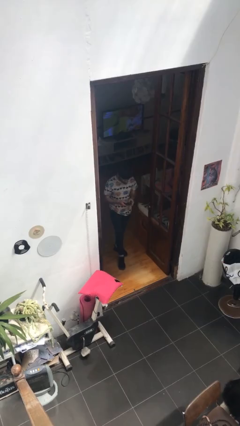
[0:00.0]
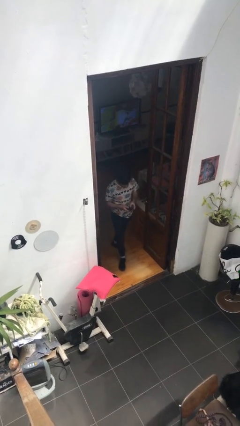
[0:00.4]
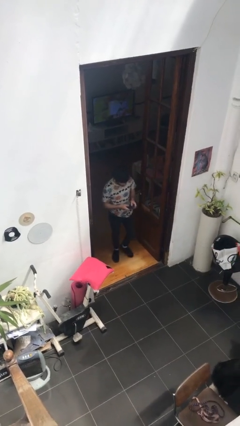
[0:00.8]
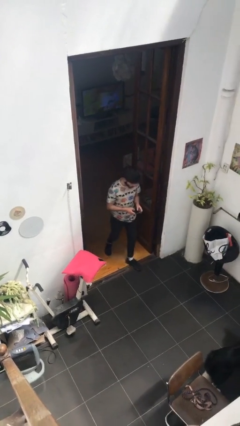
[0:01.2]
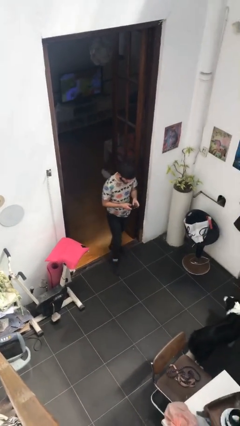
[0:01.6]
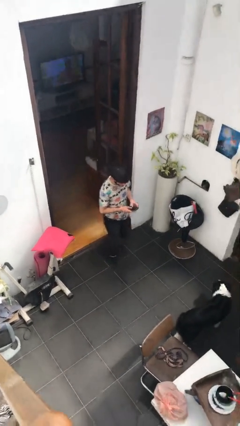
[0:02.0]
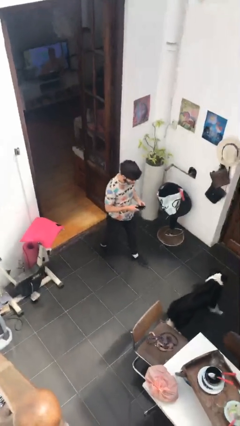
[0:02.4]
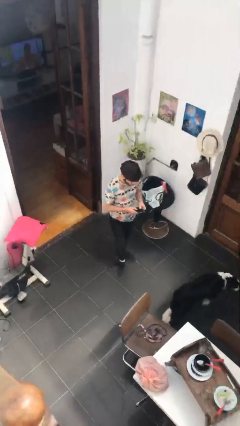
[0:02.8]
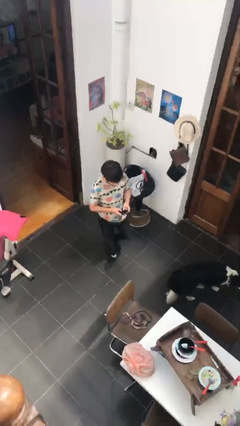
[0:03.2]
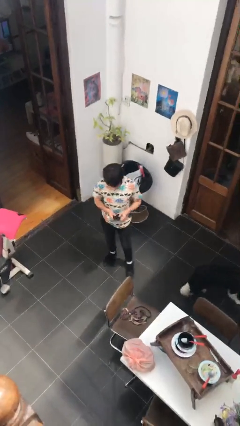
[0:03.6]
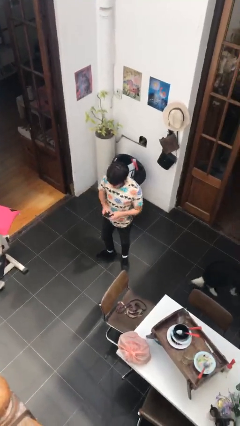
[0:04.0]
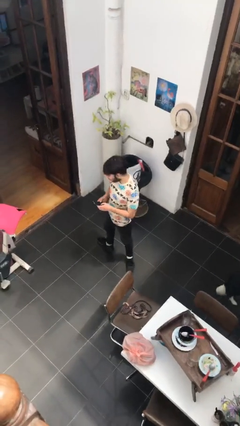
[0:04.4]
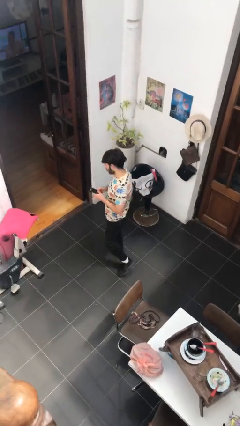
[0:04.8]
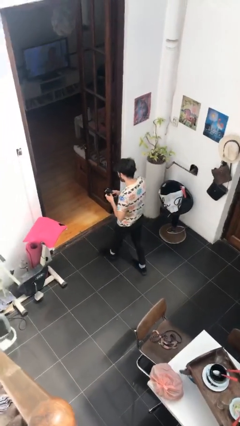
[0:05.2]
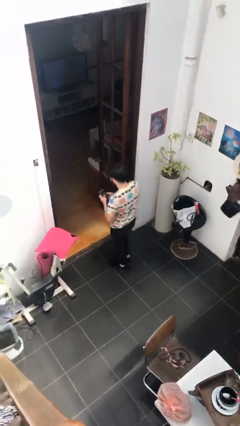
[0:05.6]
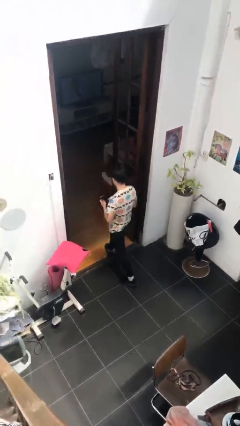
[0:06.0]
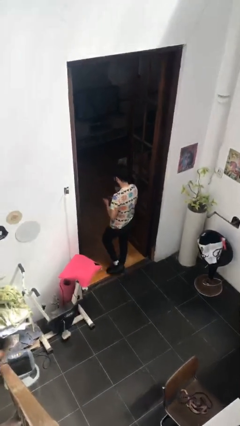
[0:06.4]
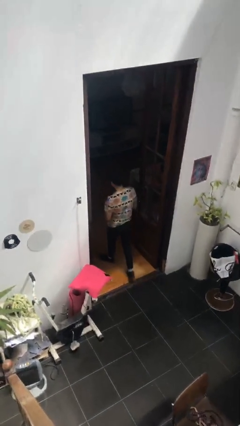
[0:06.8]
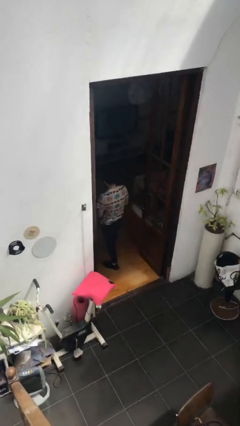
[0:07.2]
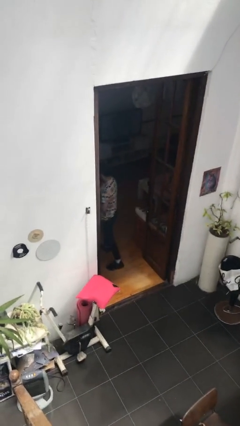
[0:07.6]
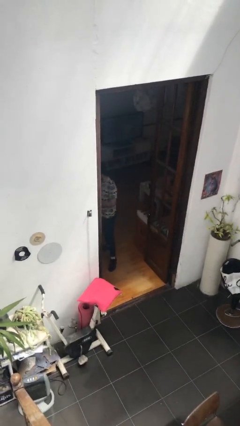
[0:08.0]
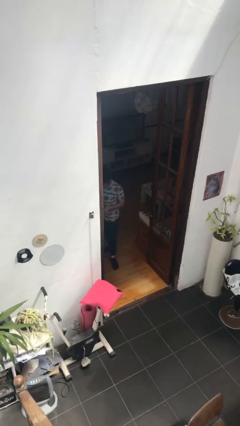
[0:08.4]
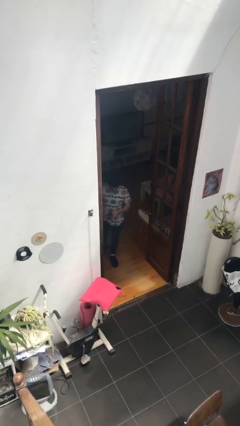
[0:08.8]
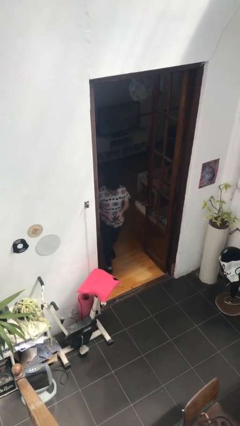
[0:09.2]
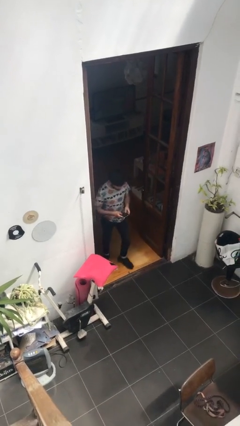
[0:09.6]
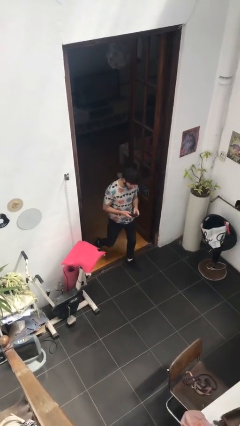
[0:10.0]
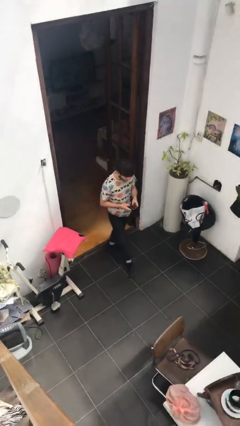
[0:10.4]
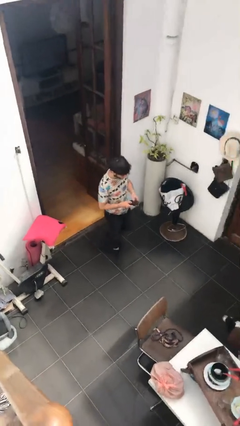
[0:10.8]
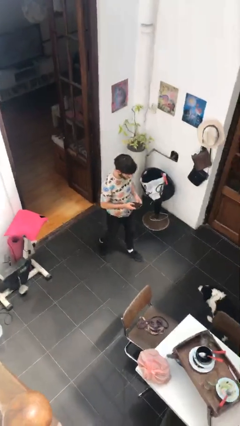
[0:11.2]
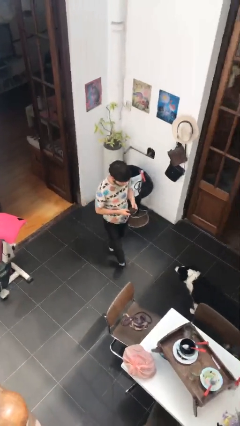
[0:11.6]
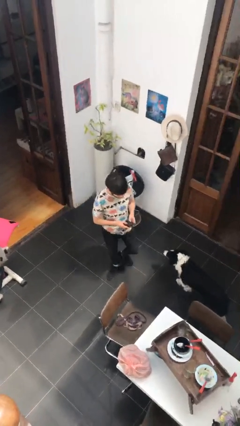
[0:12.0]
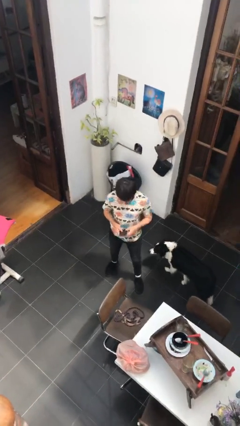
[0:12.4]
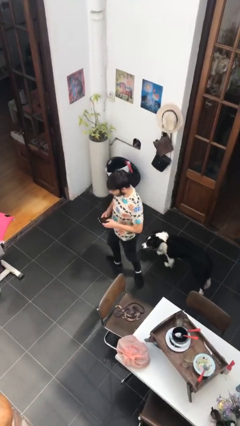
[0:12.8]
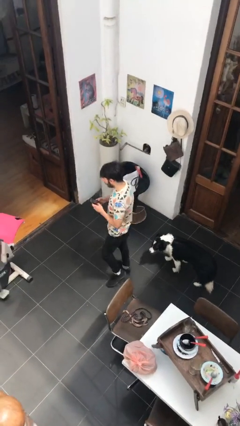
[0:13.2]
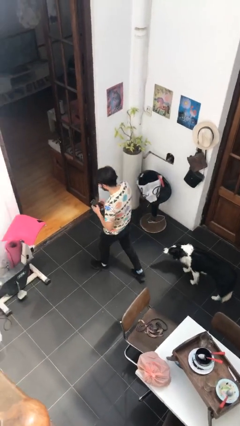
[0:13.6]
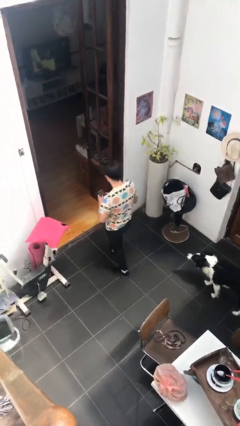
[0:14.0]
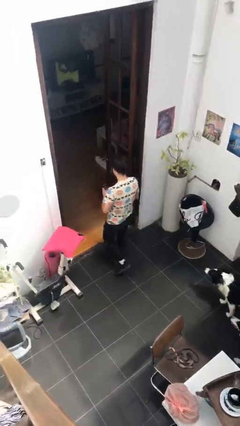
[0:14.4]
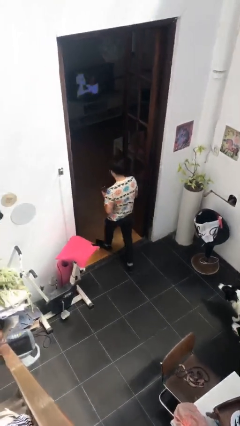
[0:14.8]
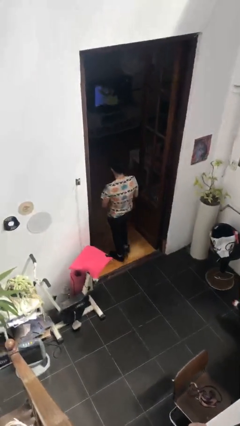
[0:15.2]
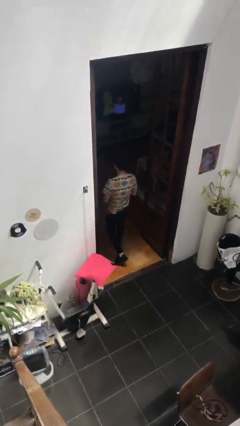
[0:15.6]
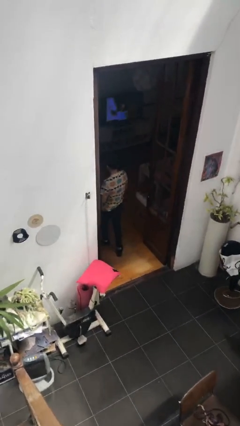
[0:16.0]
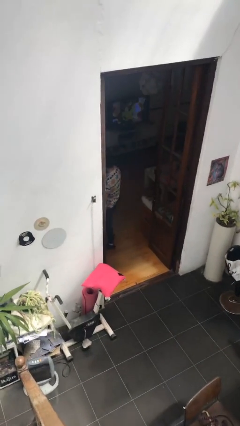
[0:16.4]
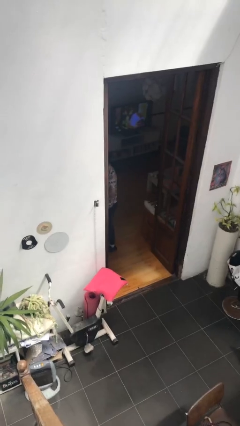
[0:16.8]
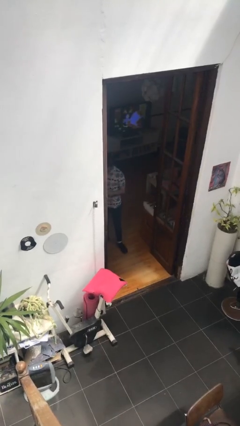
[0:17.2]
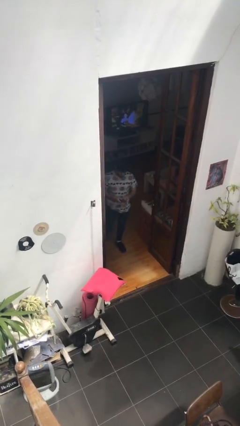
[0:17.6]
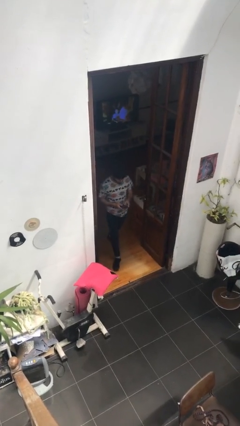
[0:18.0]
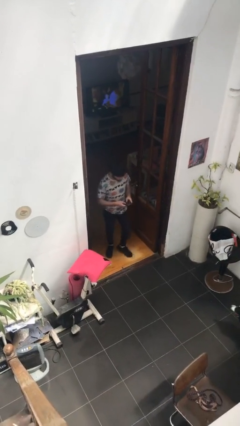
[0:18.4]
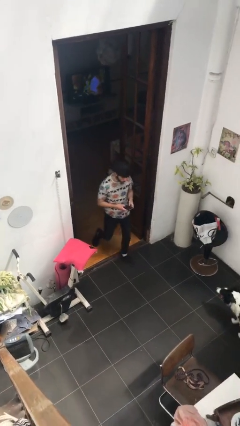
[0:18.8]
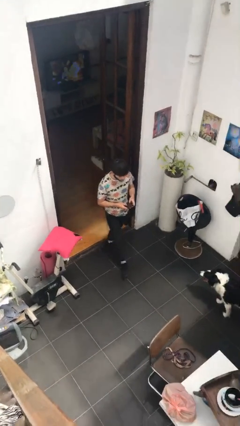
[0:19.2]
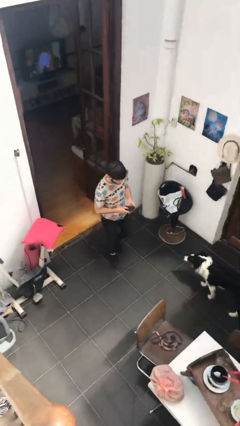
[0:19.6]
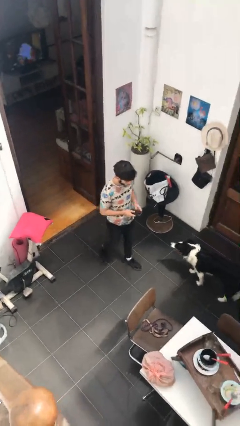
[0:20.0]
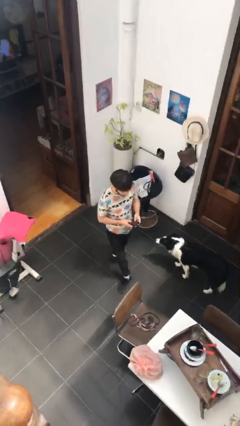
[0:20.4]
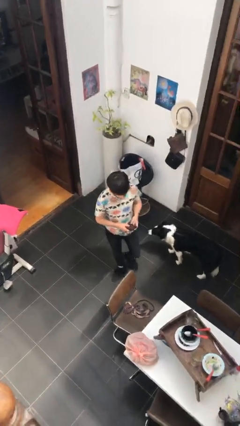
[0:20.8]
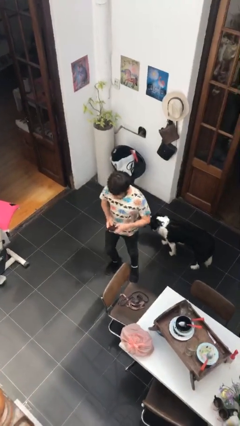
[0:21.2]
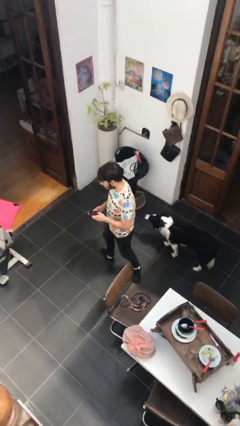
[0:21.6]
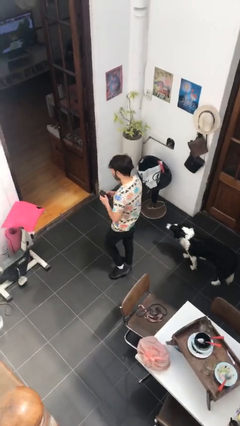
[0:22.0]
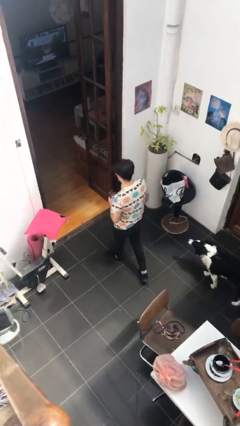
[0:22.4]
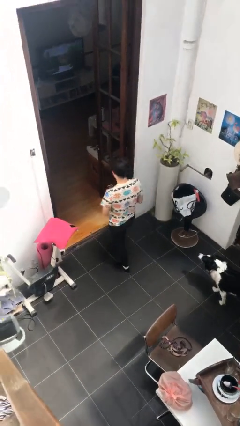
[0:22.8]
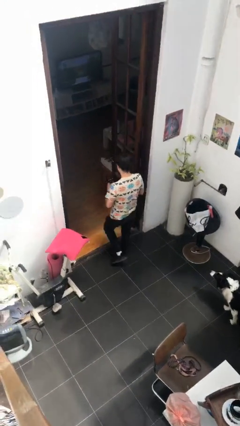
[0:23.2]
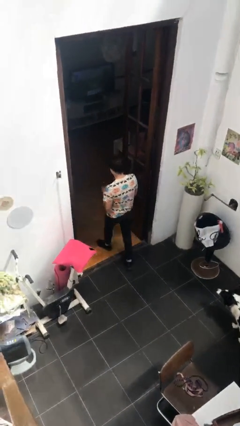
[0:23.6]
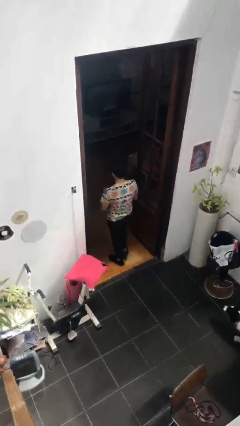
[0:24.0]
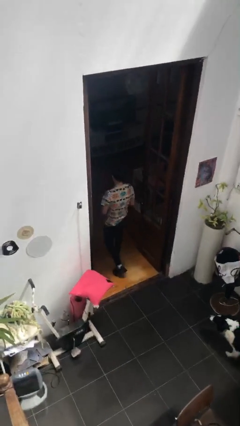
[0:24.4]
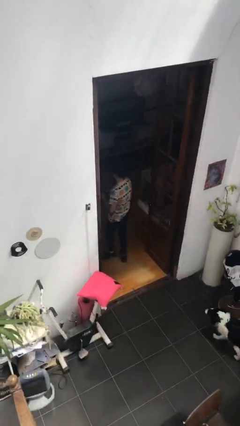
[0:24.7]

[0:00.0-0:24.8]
person texts on phone

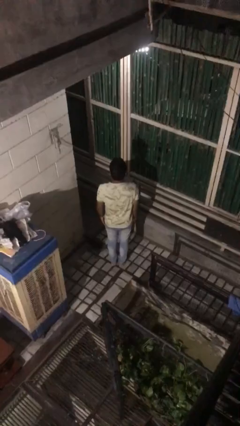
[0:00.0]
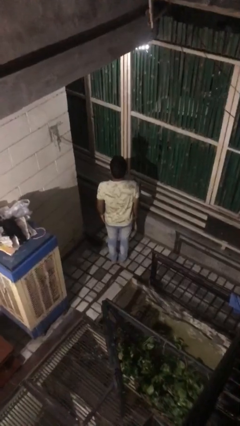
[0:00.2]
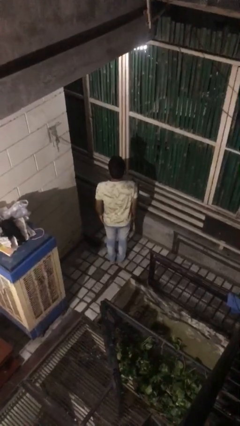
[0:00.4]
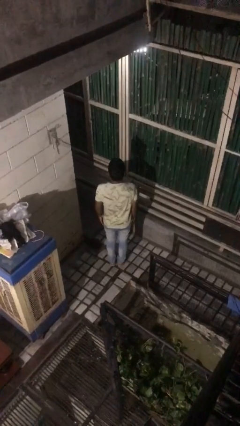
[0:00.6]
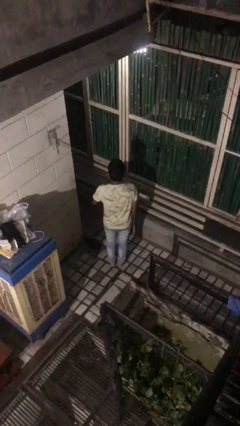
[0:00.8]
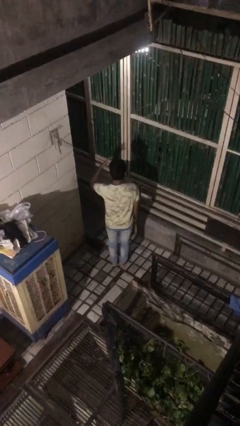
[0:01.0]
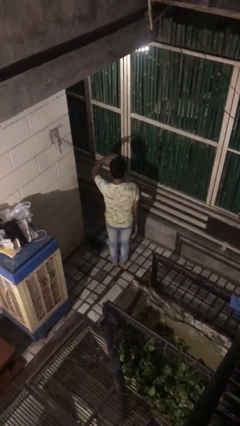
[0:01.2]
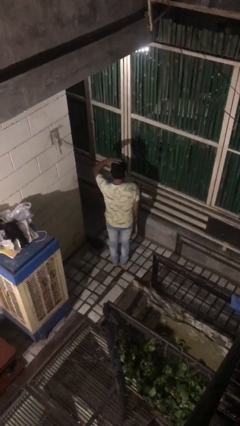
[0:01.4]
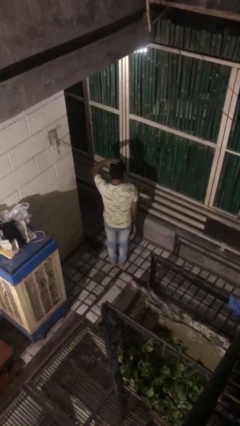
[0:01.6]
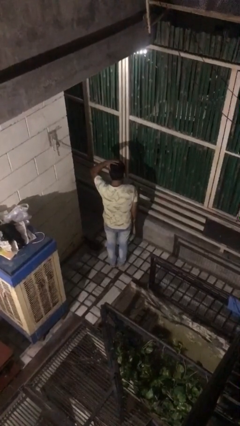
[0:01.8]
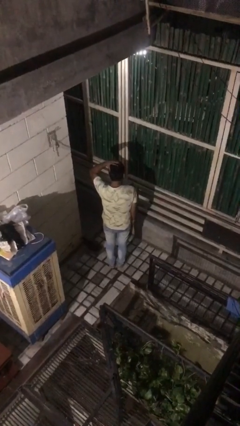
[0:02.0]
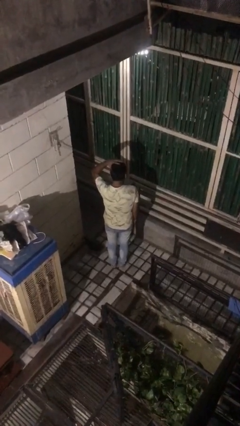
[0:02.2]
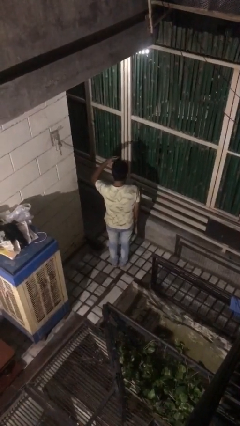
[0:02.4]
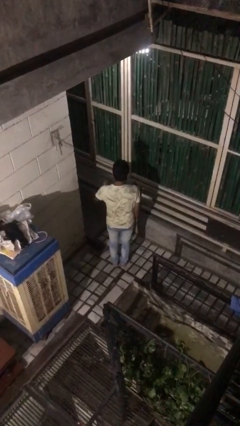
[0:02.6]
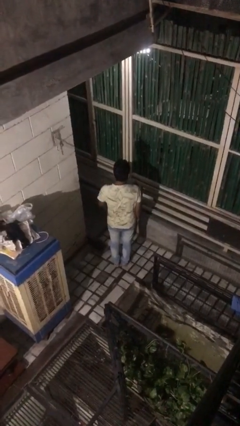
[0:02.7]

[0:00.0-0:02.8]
person pats head

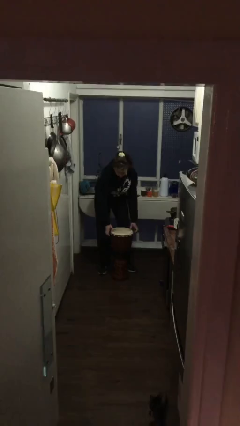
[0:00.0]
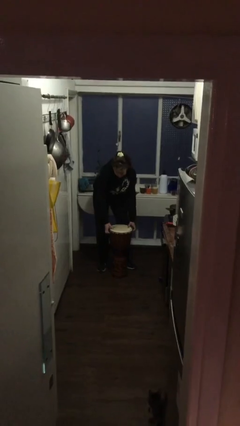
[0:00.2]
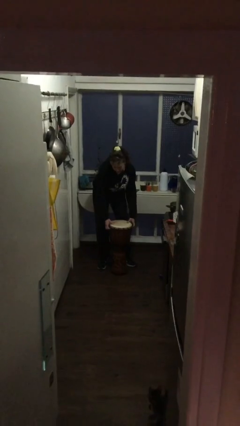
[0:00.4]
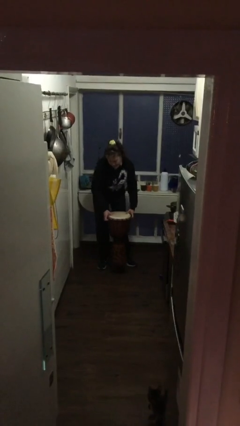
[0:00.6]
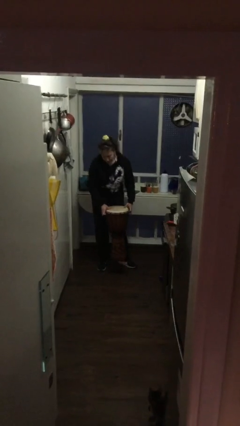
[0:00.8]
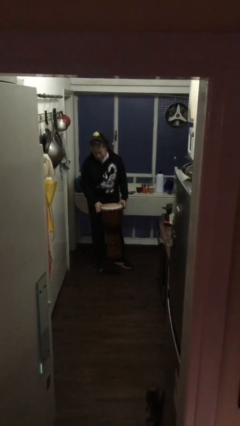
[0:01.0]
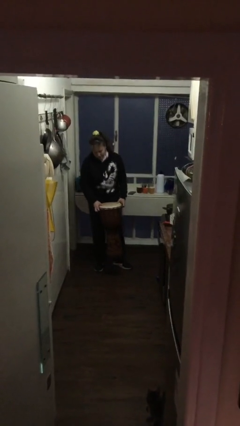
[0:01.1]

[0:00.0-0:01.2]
person picks up object from floor

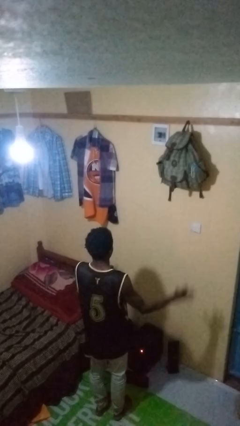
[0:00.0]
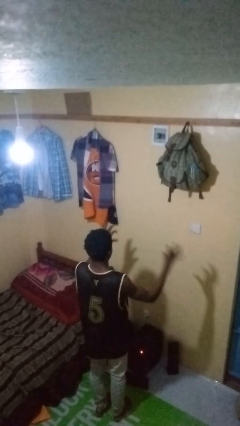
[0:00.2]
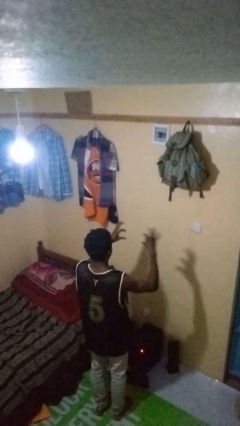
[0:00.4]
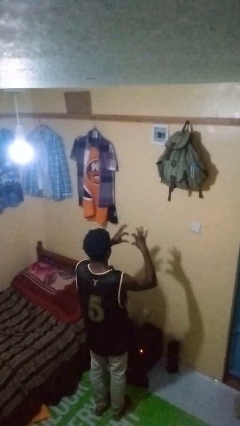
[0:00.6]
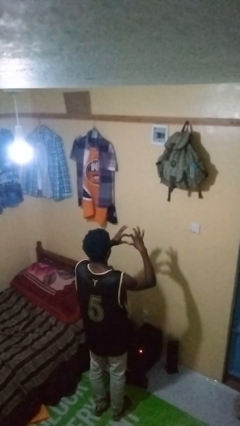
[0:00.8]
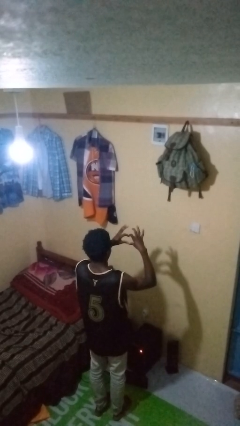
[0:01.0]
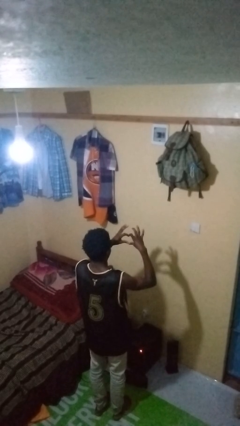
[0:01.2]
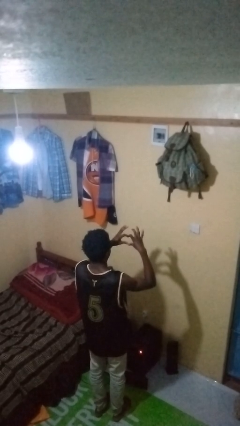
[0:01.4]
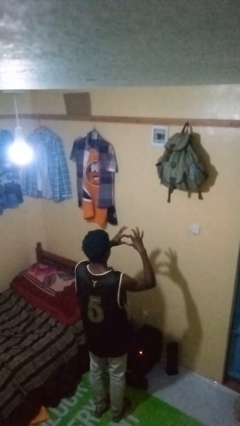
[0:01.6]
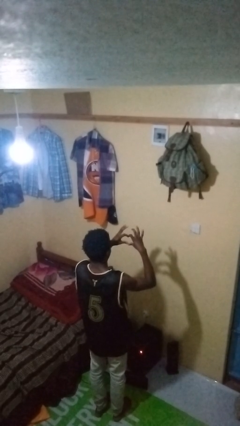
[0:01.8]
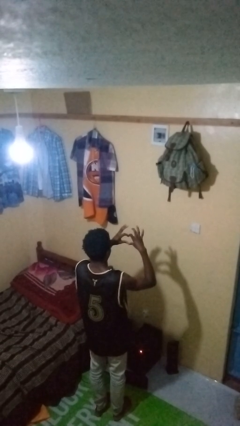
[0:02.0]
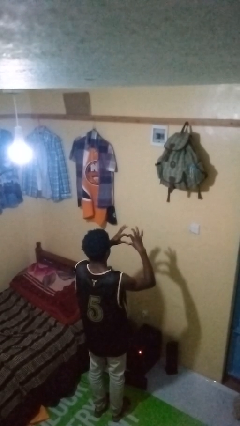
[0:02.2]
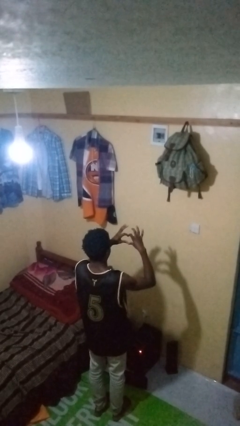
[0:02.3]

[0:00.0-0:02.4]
person gestures heart
